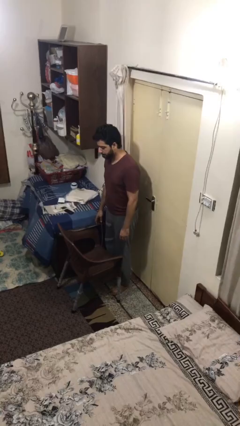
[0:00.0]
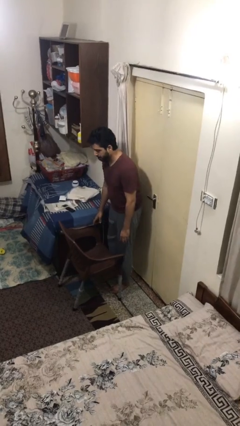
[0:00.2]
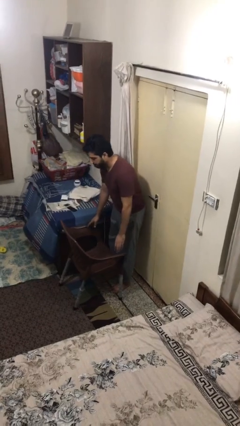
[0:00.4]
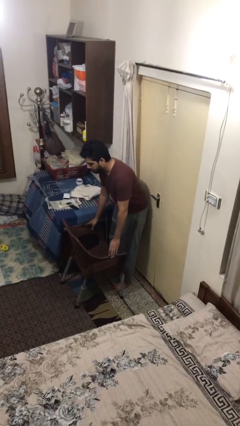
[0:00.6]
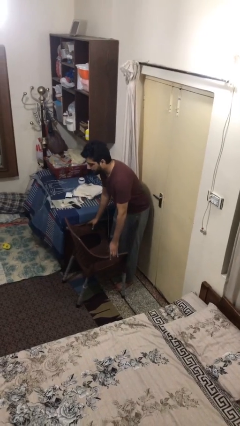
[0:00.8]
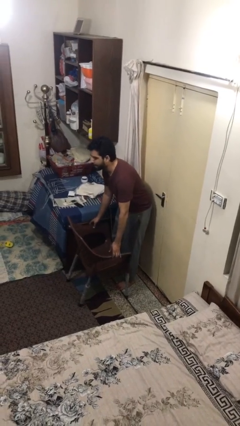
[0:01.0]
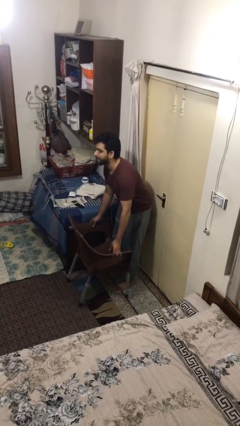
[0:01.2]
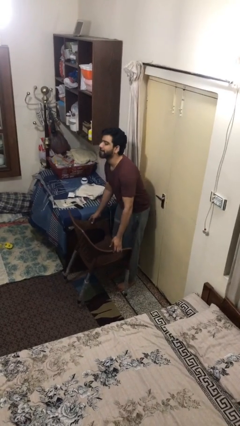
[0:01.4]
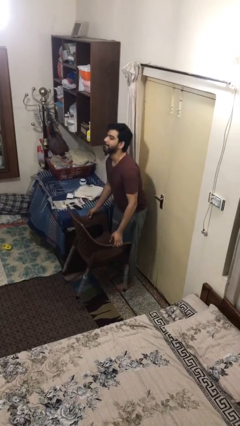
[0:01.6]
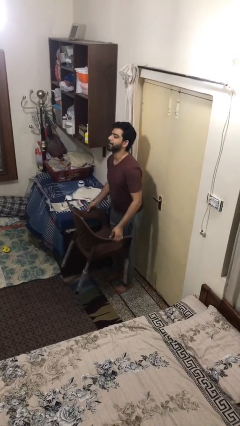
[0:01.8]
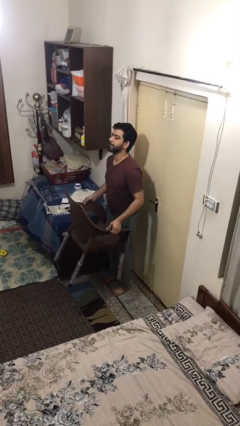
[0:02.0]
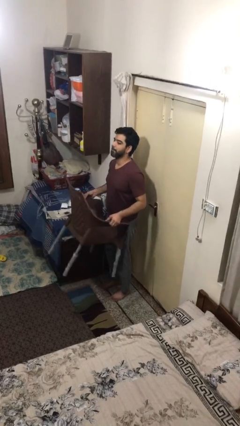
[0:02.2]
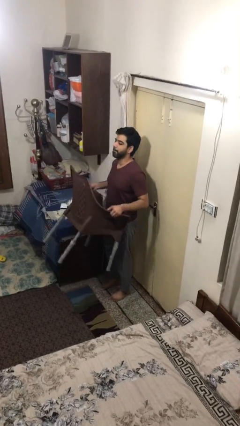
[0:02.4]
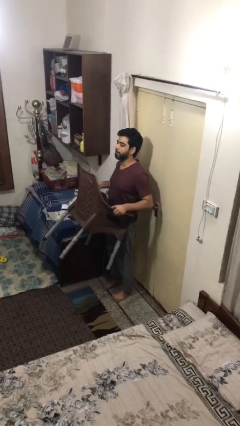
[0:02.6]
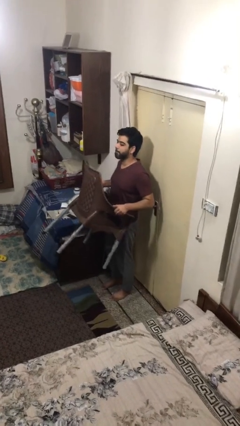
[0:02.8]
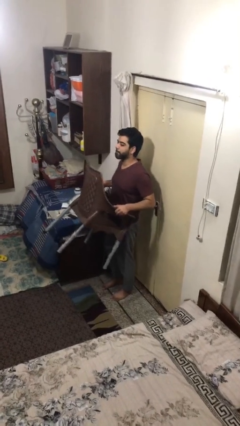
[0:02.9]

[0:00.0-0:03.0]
person picks up object from floor

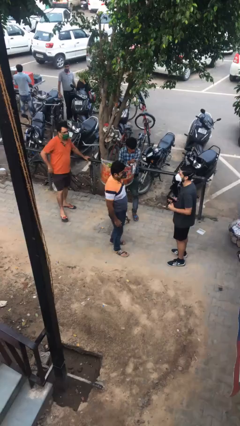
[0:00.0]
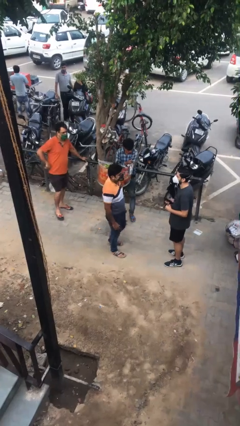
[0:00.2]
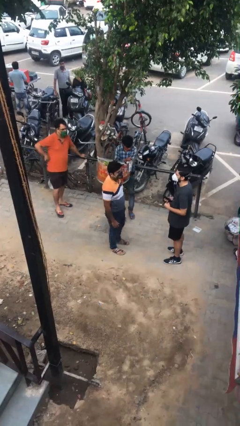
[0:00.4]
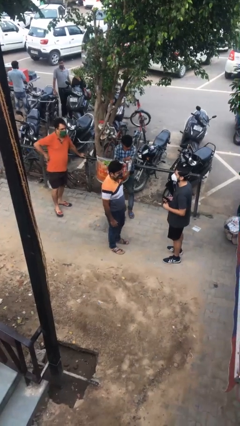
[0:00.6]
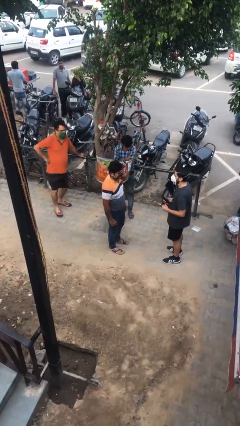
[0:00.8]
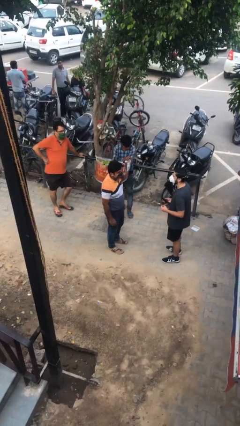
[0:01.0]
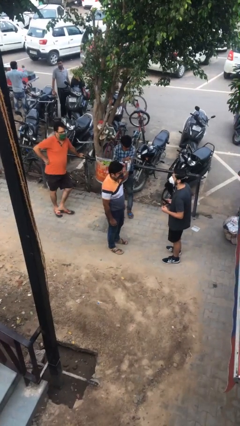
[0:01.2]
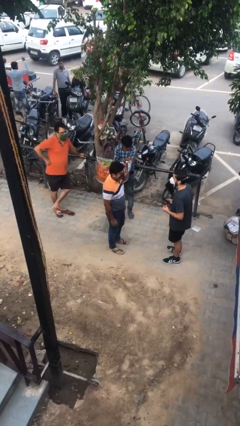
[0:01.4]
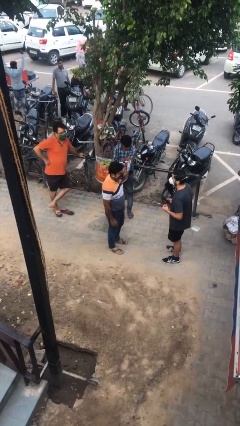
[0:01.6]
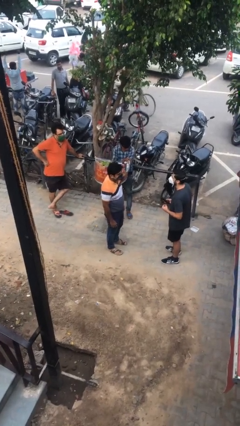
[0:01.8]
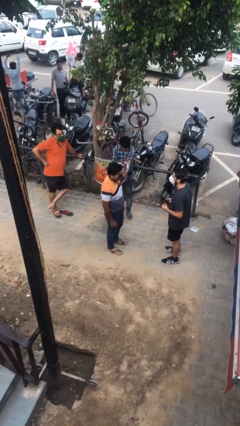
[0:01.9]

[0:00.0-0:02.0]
person talks to person

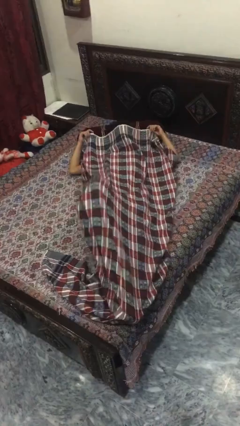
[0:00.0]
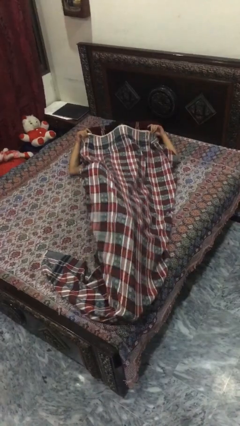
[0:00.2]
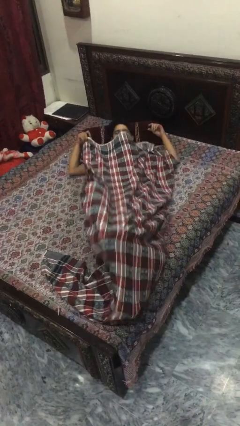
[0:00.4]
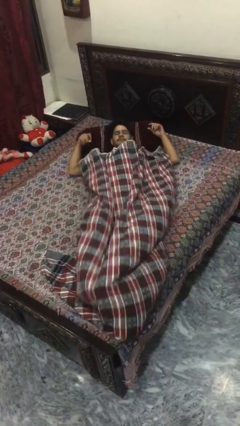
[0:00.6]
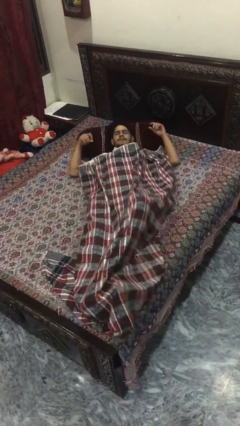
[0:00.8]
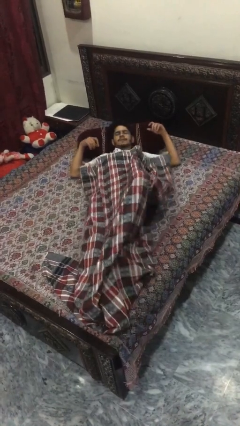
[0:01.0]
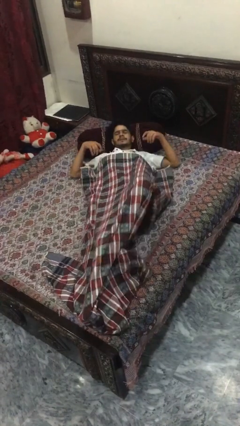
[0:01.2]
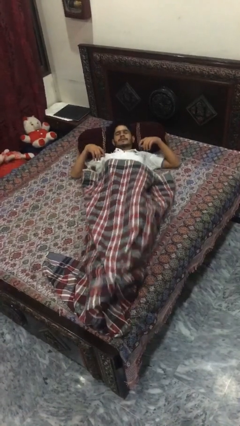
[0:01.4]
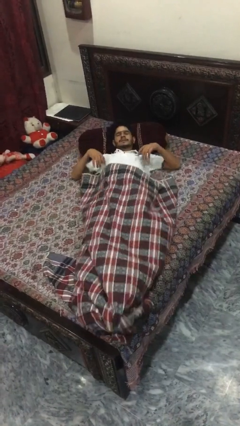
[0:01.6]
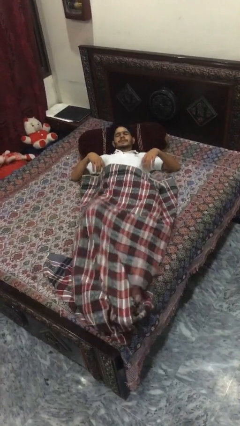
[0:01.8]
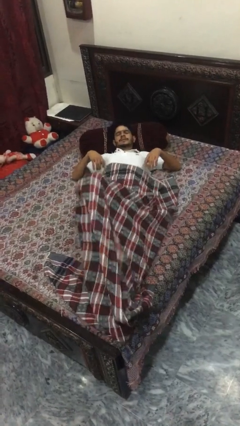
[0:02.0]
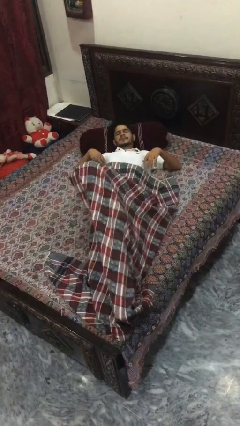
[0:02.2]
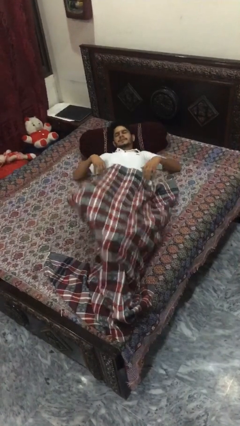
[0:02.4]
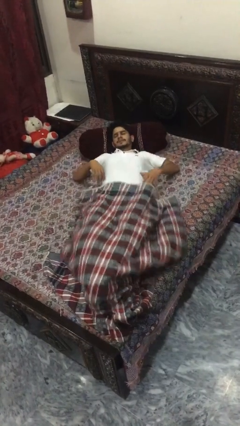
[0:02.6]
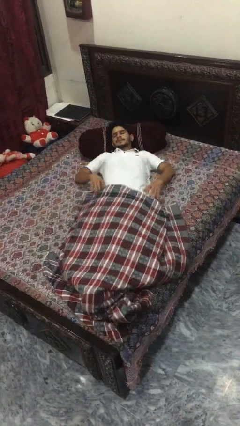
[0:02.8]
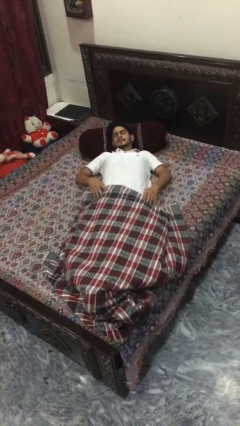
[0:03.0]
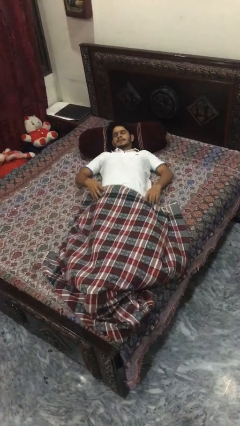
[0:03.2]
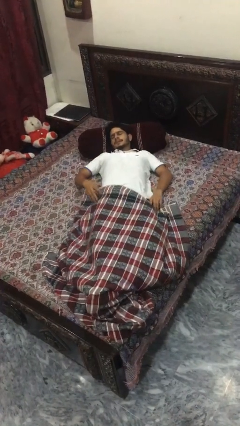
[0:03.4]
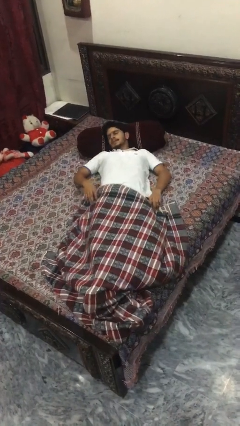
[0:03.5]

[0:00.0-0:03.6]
person uncovers with bedsheets

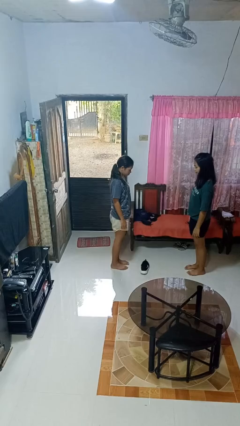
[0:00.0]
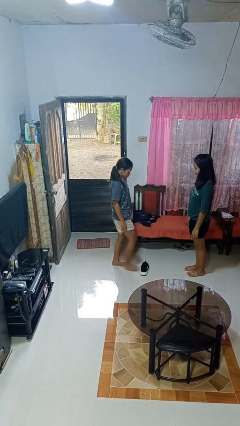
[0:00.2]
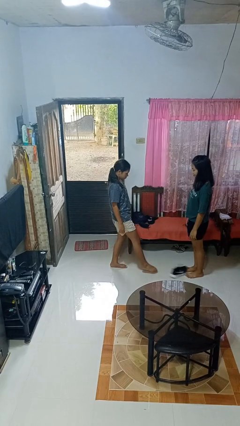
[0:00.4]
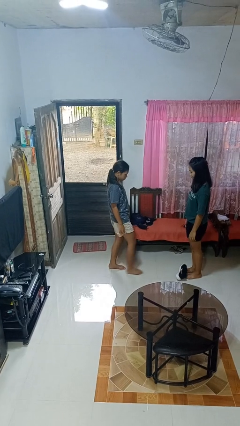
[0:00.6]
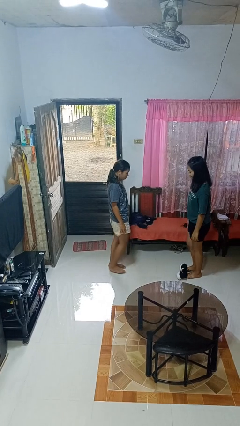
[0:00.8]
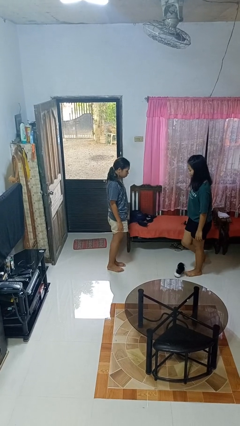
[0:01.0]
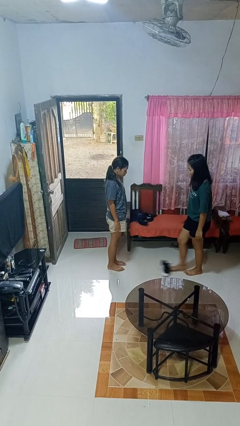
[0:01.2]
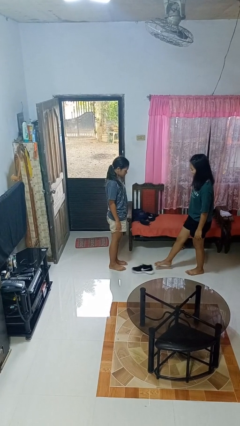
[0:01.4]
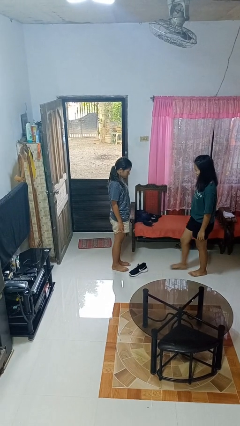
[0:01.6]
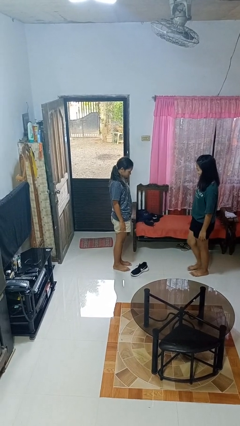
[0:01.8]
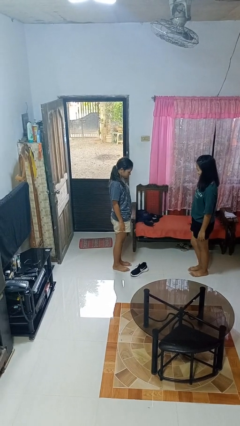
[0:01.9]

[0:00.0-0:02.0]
person kicks object to person

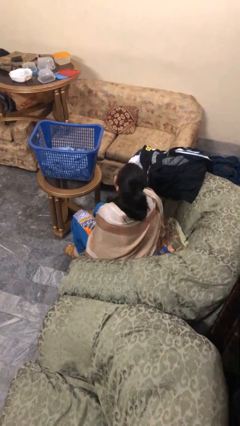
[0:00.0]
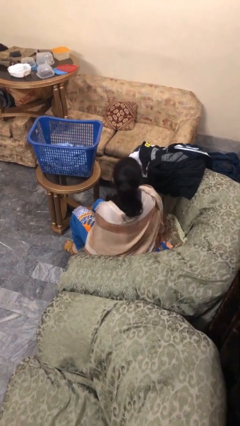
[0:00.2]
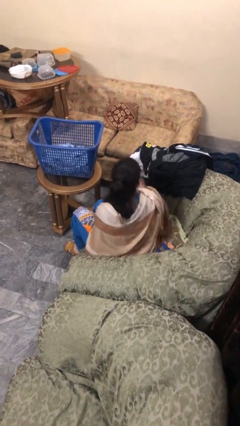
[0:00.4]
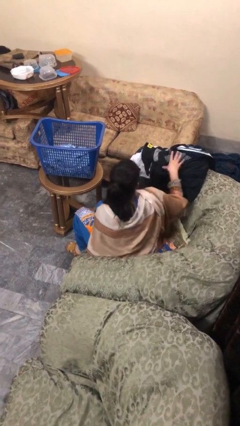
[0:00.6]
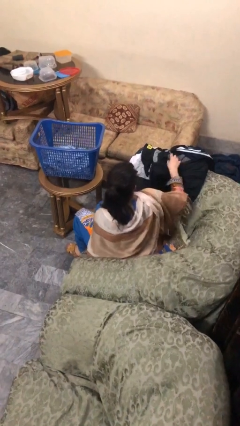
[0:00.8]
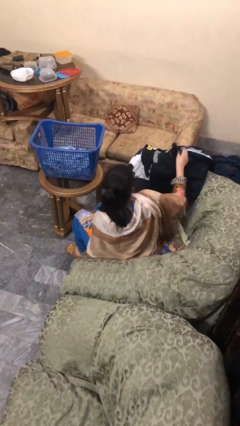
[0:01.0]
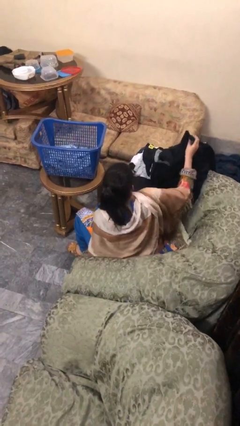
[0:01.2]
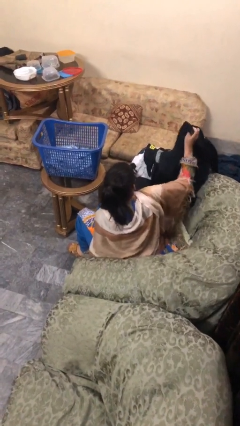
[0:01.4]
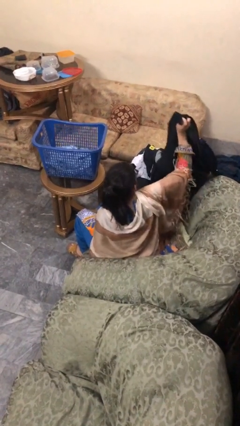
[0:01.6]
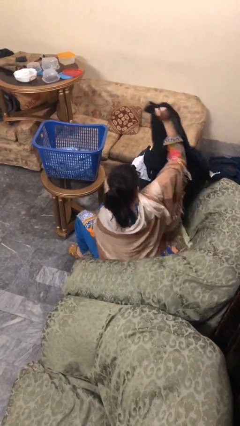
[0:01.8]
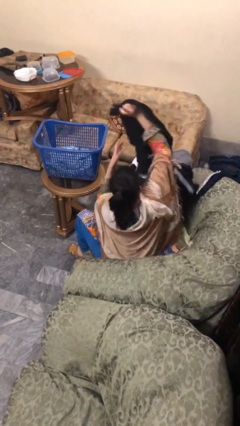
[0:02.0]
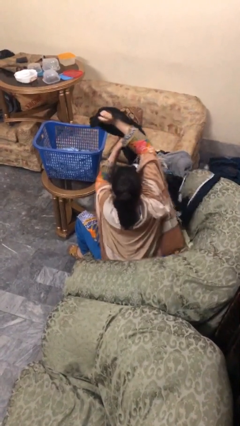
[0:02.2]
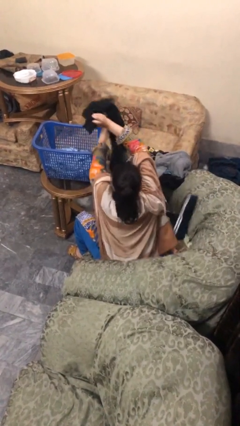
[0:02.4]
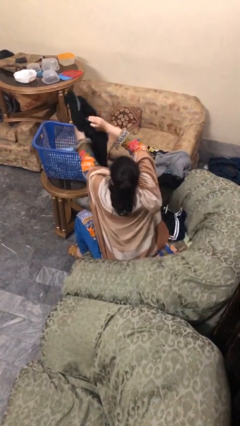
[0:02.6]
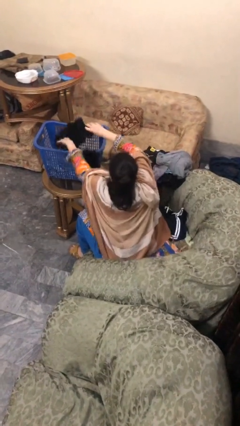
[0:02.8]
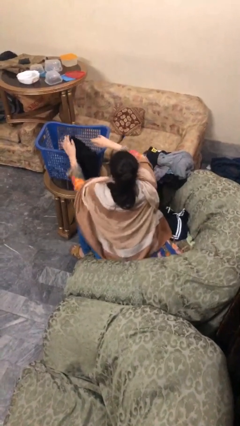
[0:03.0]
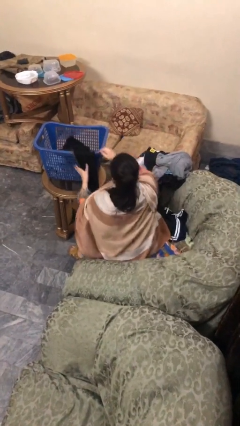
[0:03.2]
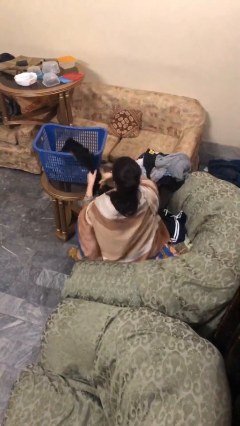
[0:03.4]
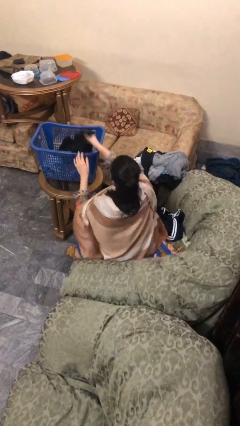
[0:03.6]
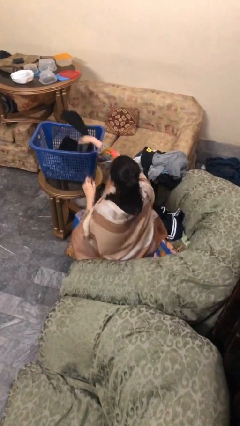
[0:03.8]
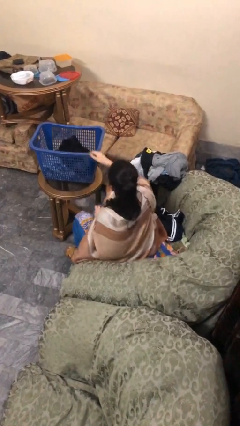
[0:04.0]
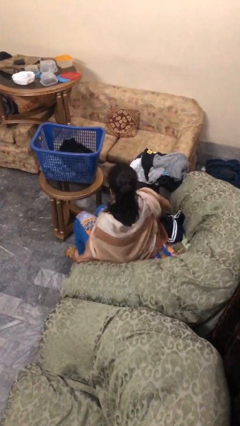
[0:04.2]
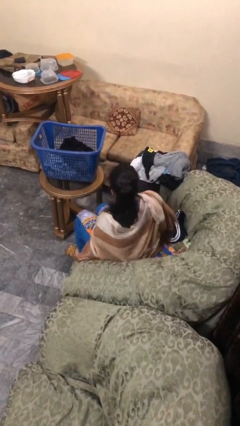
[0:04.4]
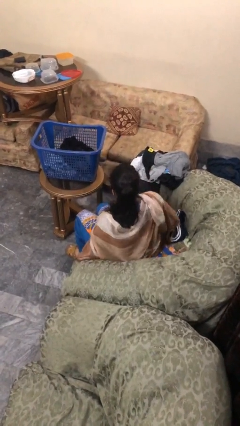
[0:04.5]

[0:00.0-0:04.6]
person puts object into basket

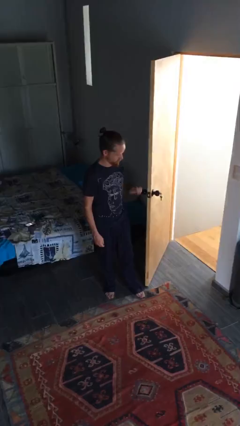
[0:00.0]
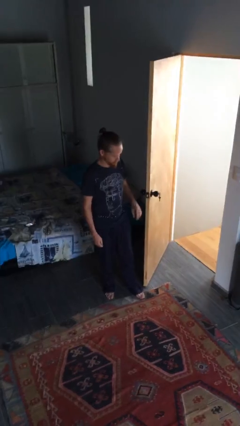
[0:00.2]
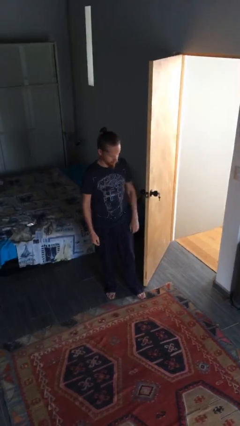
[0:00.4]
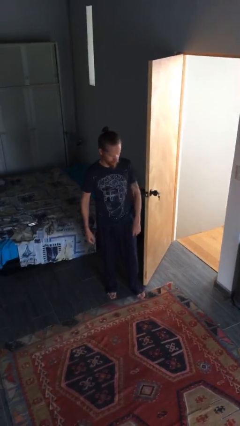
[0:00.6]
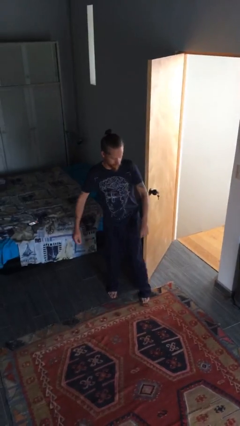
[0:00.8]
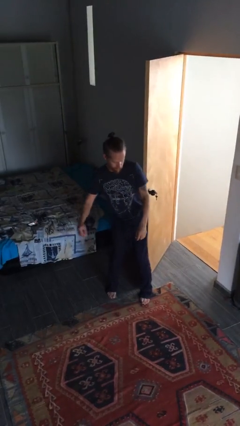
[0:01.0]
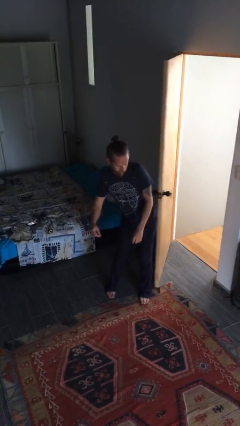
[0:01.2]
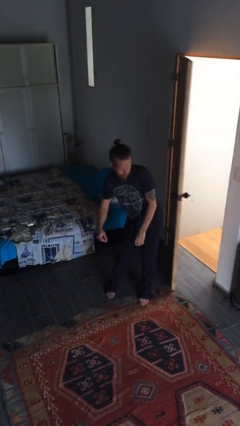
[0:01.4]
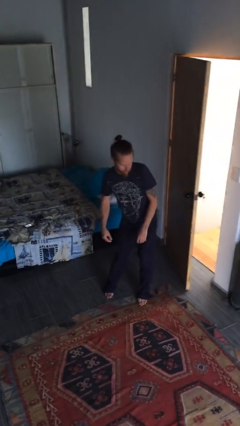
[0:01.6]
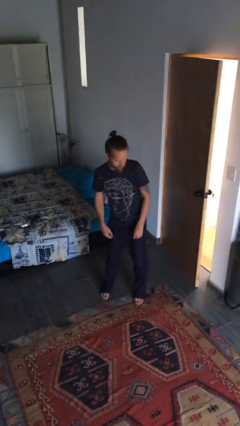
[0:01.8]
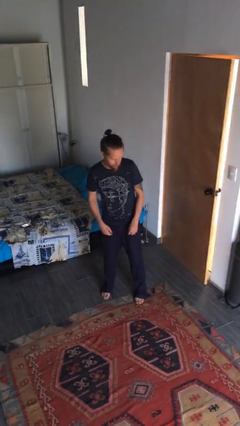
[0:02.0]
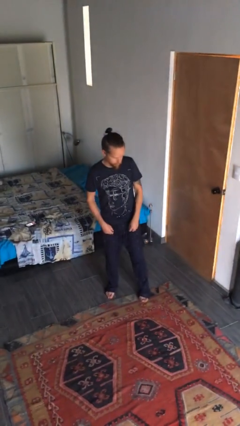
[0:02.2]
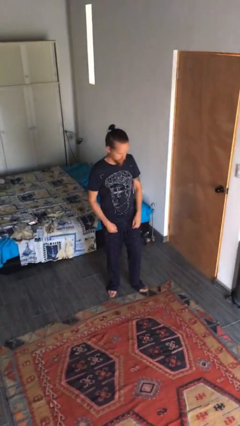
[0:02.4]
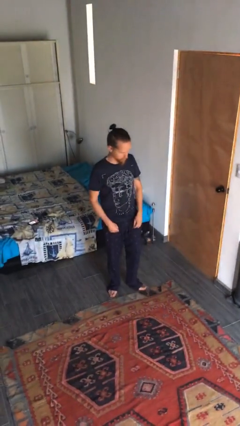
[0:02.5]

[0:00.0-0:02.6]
person closes door with hip
